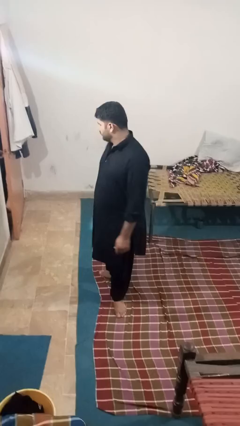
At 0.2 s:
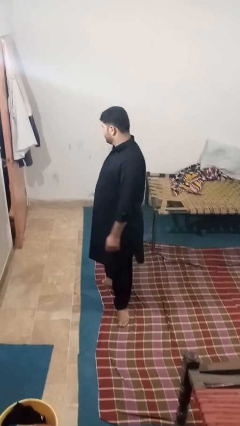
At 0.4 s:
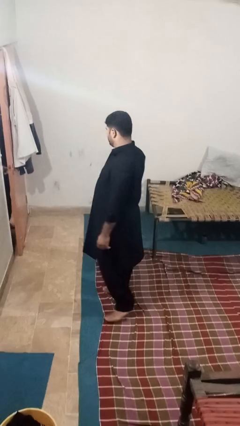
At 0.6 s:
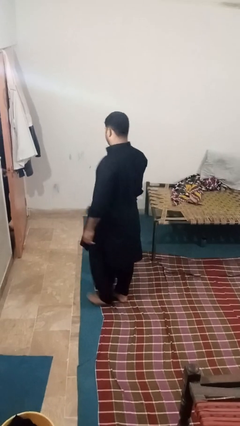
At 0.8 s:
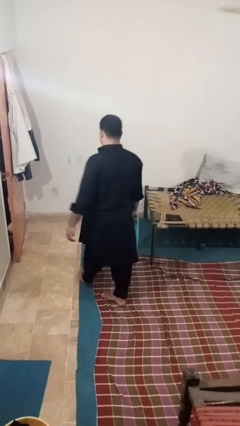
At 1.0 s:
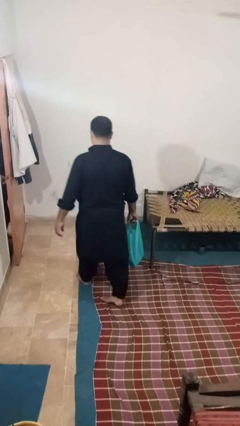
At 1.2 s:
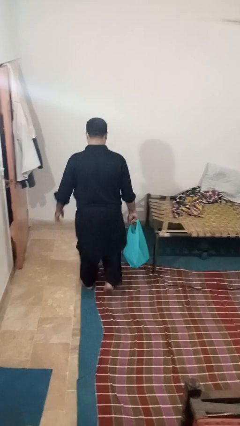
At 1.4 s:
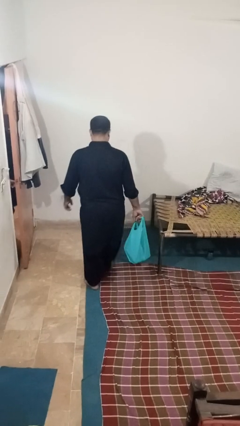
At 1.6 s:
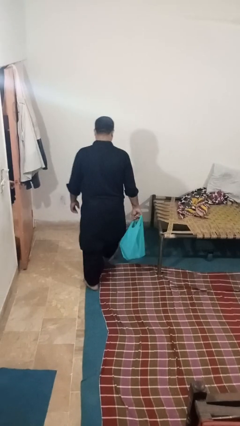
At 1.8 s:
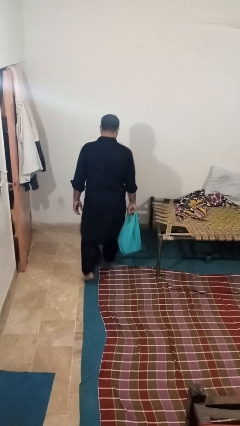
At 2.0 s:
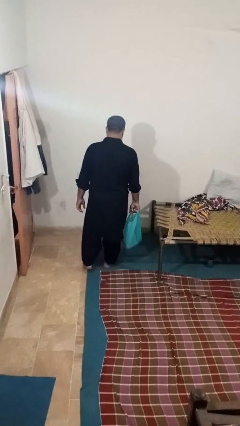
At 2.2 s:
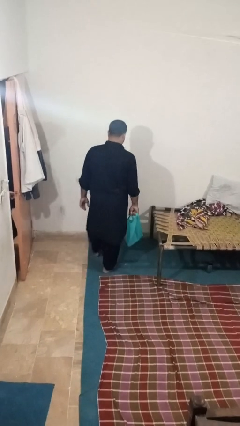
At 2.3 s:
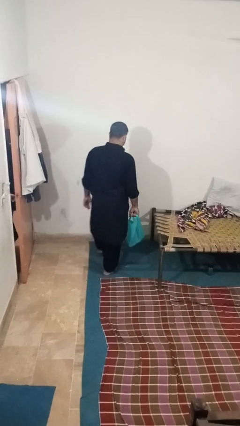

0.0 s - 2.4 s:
person carries groceries

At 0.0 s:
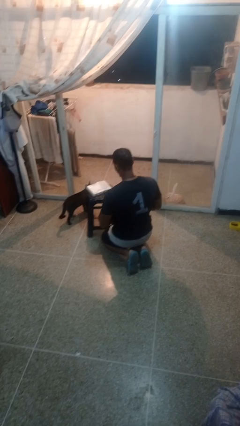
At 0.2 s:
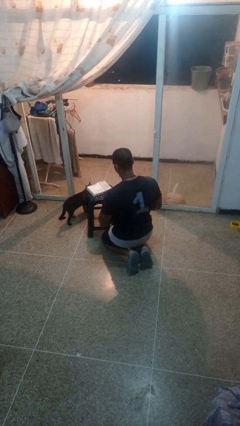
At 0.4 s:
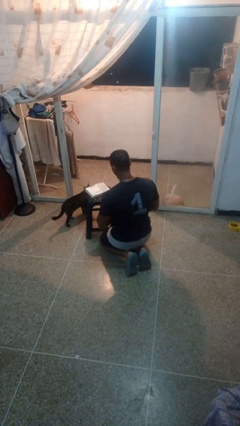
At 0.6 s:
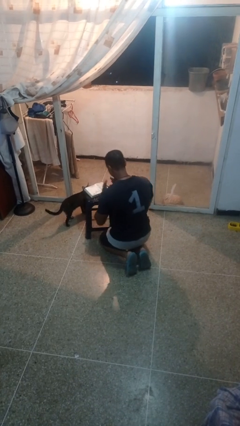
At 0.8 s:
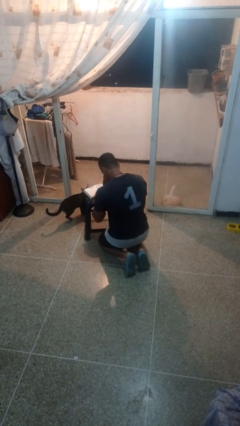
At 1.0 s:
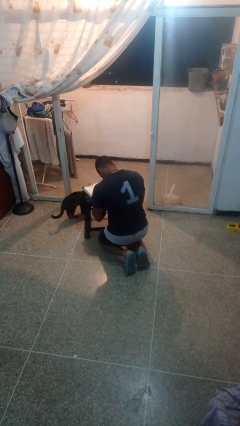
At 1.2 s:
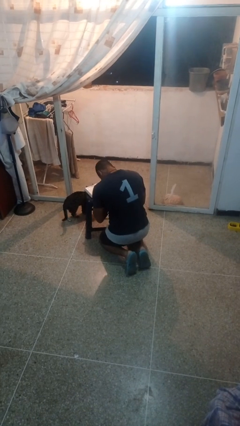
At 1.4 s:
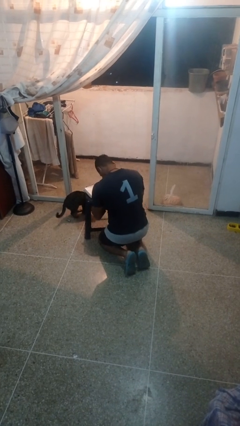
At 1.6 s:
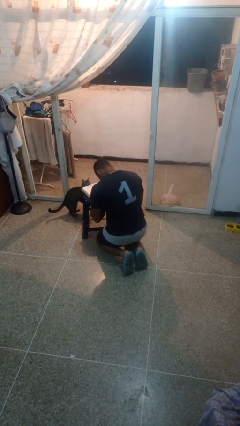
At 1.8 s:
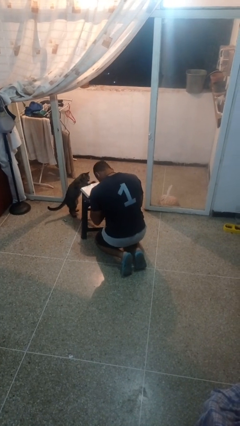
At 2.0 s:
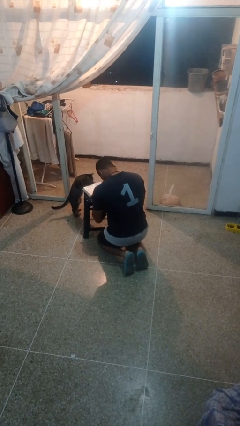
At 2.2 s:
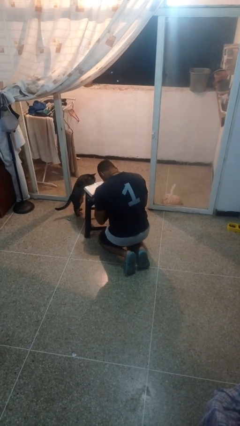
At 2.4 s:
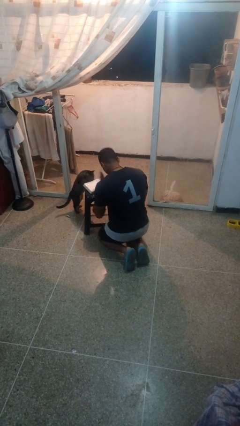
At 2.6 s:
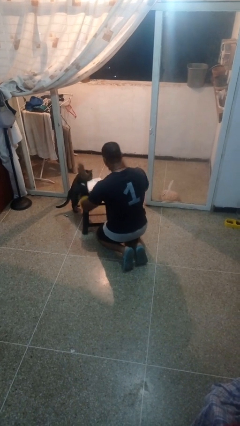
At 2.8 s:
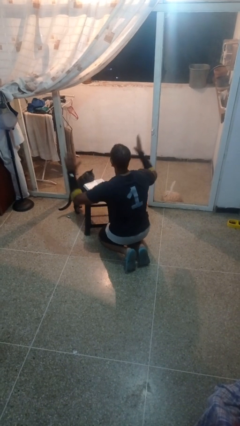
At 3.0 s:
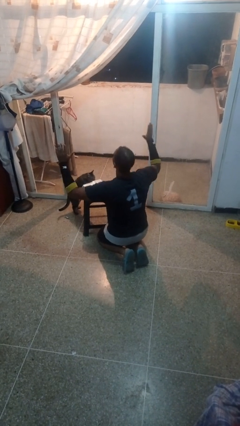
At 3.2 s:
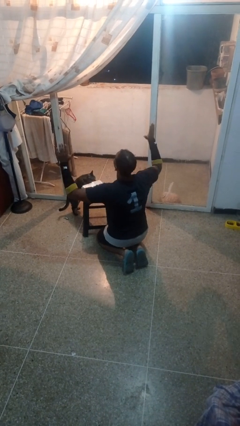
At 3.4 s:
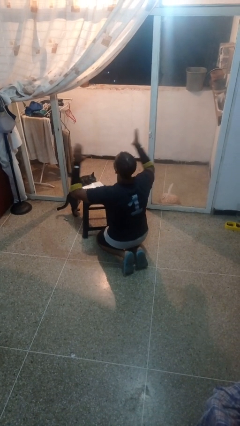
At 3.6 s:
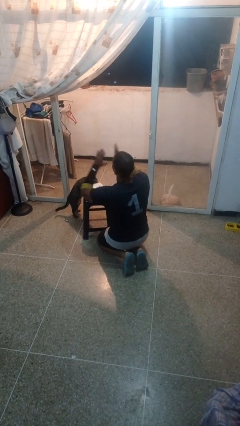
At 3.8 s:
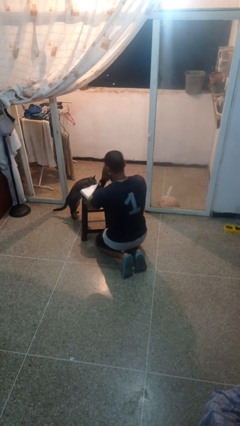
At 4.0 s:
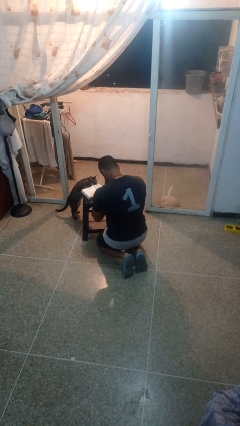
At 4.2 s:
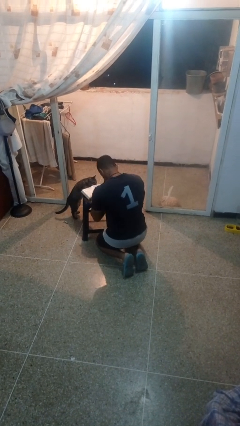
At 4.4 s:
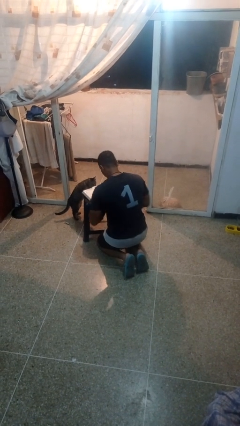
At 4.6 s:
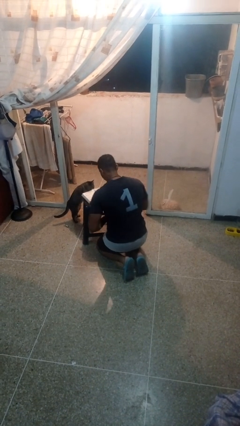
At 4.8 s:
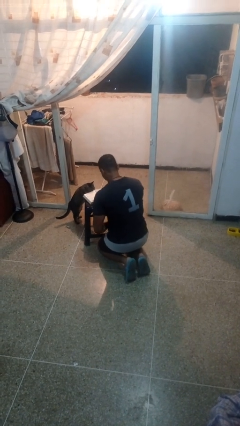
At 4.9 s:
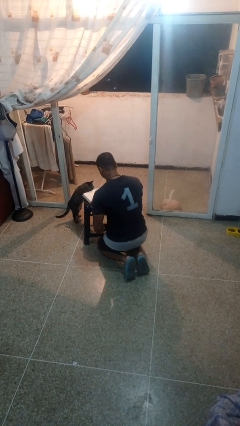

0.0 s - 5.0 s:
person prays

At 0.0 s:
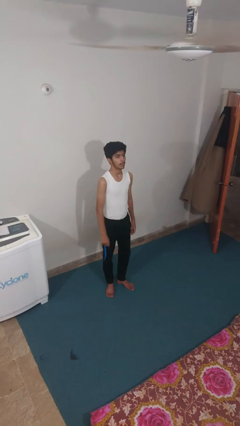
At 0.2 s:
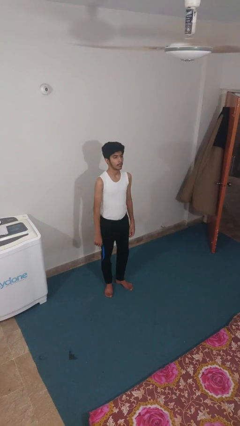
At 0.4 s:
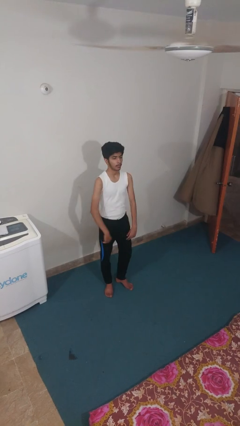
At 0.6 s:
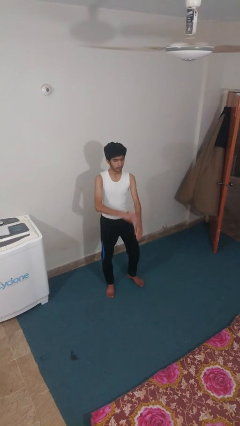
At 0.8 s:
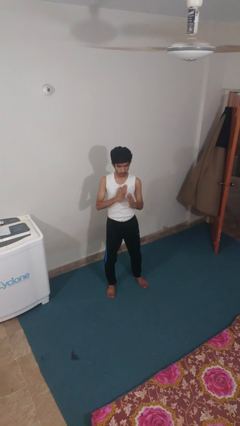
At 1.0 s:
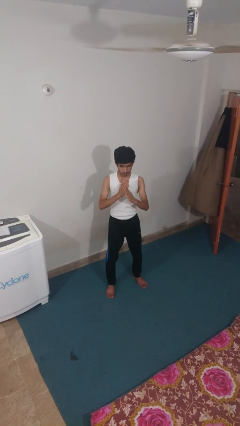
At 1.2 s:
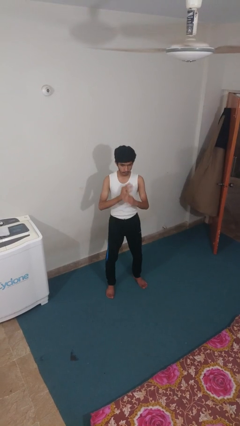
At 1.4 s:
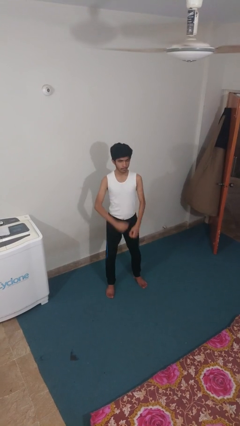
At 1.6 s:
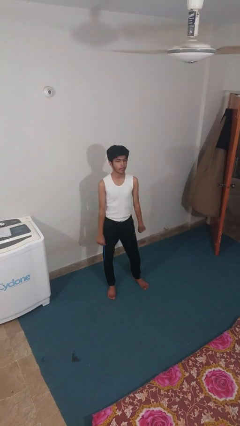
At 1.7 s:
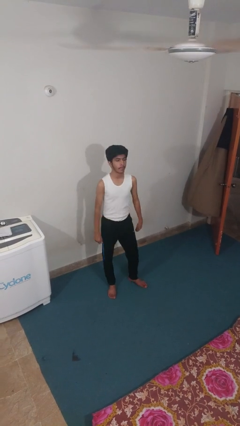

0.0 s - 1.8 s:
person karate chop

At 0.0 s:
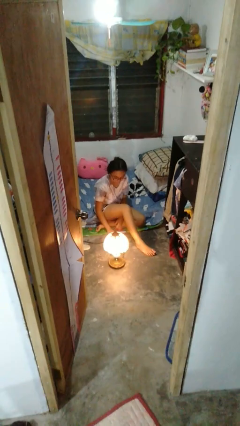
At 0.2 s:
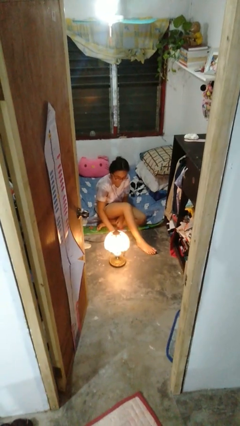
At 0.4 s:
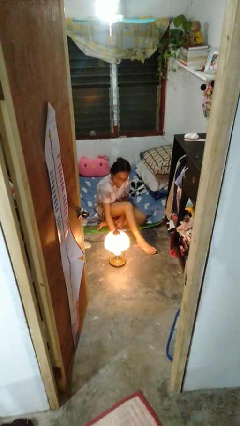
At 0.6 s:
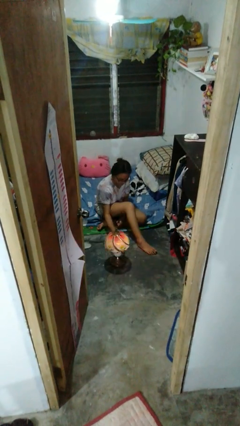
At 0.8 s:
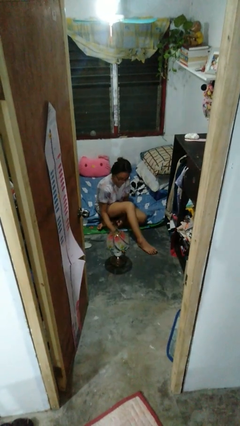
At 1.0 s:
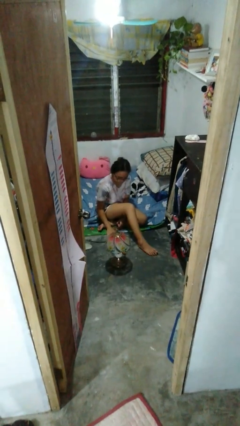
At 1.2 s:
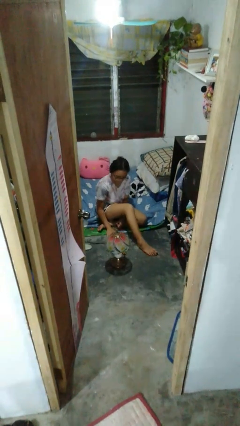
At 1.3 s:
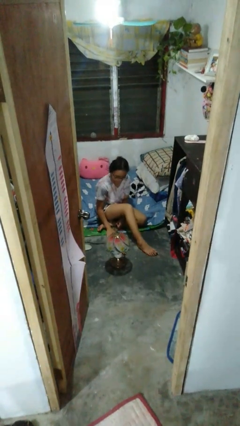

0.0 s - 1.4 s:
person turns off lamp

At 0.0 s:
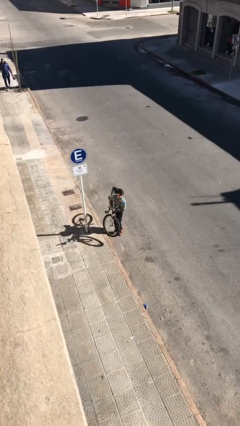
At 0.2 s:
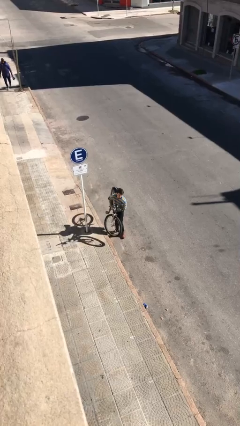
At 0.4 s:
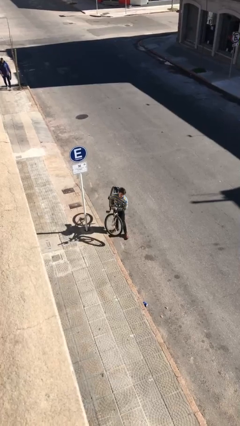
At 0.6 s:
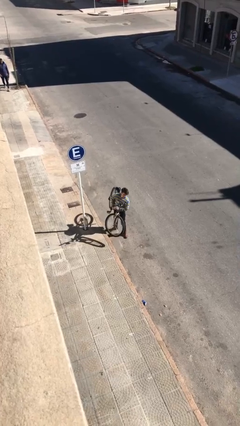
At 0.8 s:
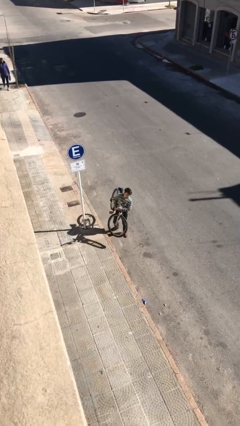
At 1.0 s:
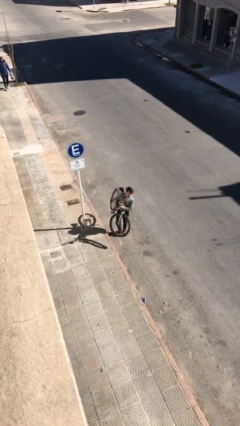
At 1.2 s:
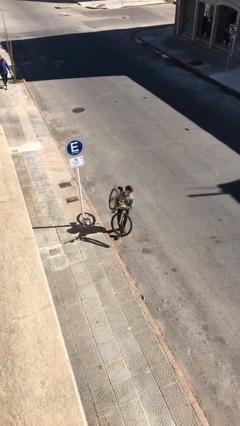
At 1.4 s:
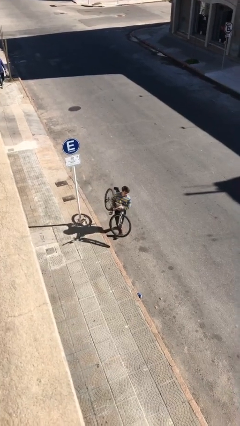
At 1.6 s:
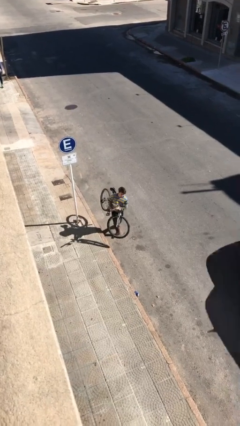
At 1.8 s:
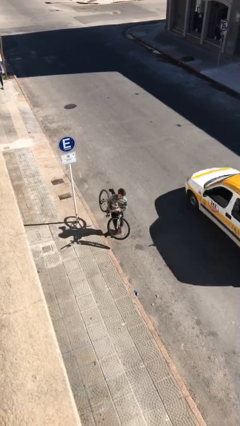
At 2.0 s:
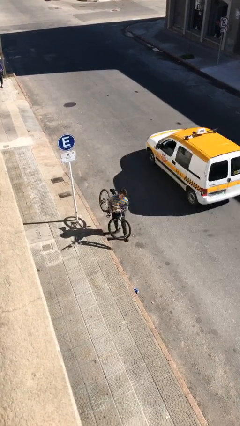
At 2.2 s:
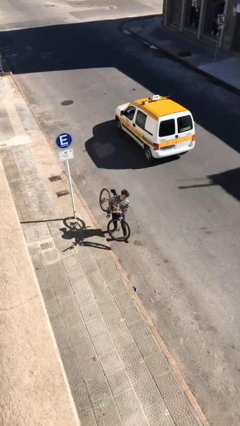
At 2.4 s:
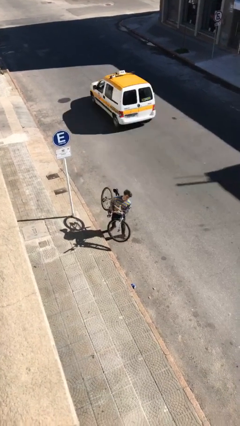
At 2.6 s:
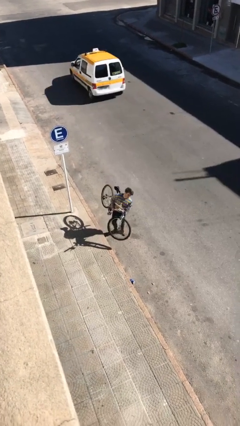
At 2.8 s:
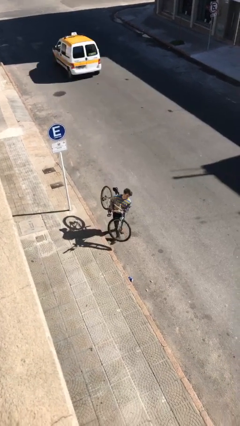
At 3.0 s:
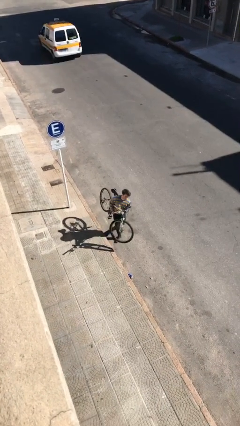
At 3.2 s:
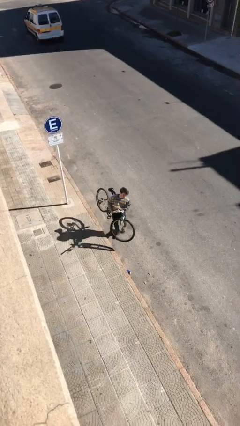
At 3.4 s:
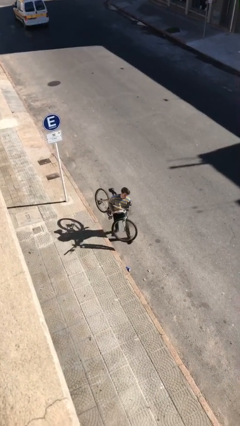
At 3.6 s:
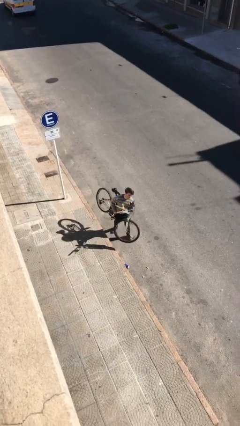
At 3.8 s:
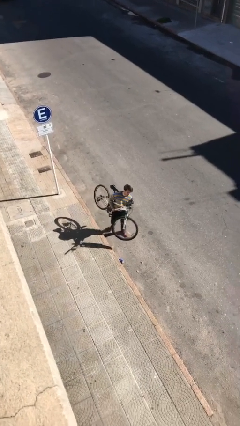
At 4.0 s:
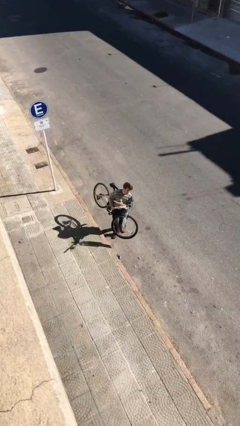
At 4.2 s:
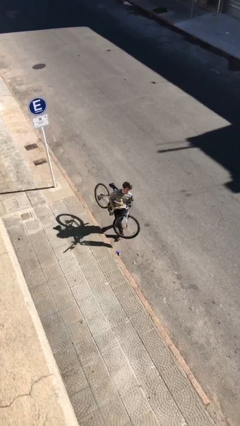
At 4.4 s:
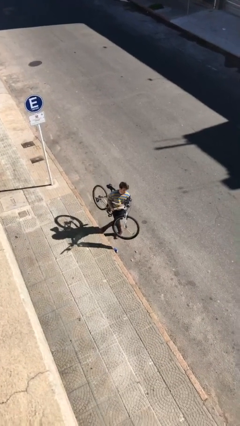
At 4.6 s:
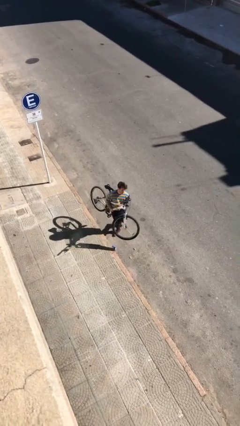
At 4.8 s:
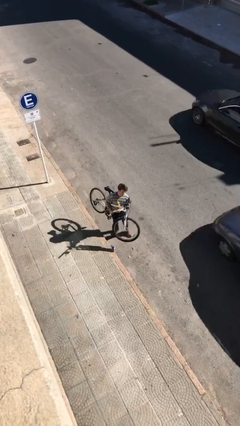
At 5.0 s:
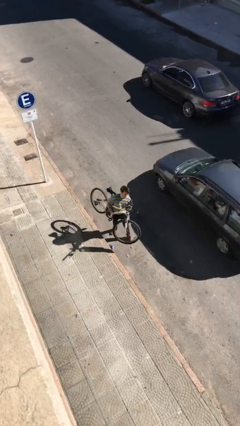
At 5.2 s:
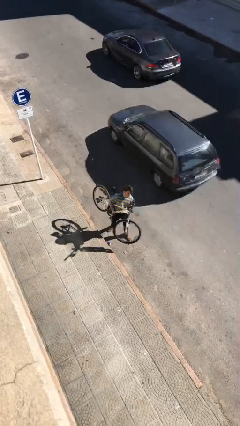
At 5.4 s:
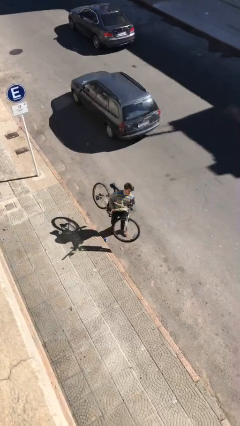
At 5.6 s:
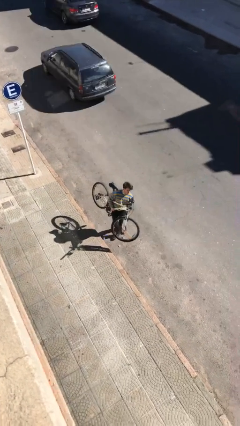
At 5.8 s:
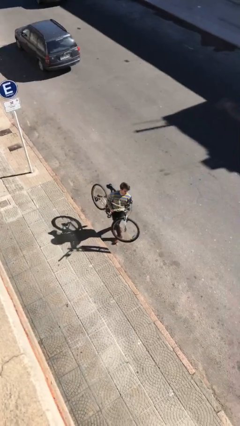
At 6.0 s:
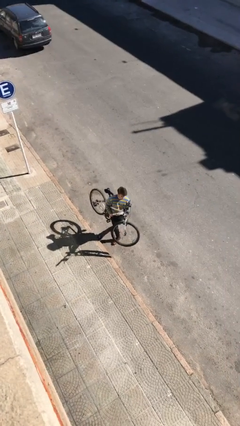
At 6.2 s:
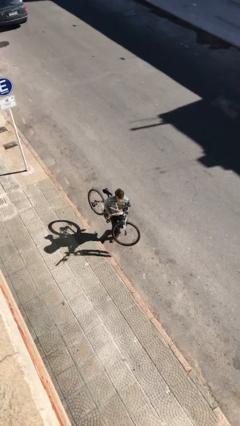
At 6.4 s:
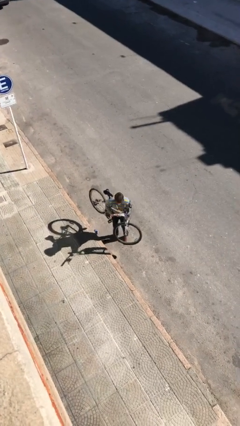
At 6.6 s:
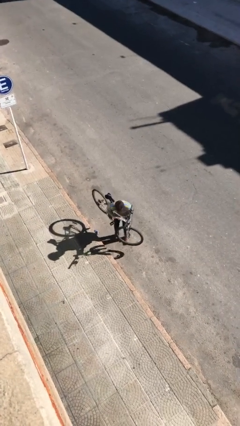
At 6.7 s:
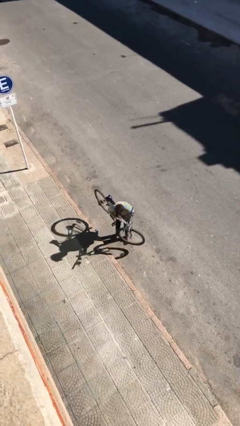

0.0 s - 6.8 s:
person carries heavy object
